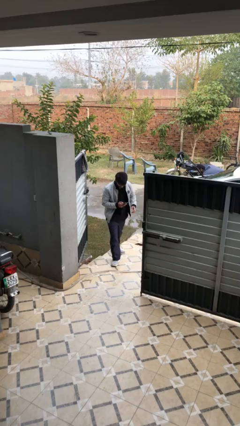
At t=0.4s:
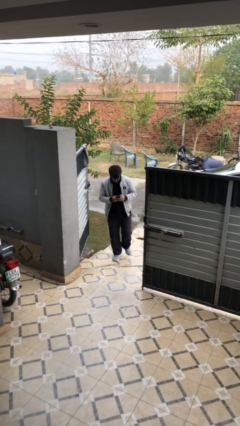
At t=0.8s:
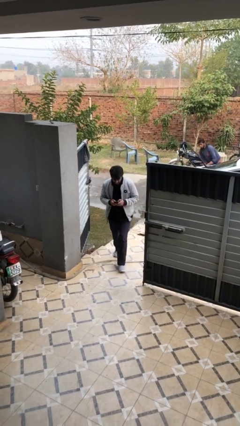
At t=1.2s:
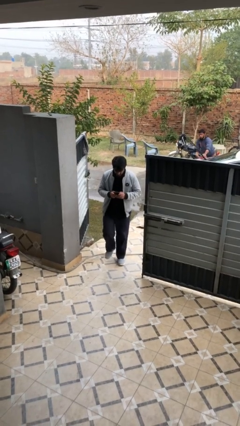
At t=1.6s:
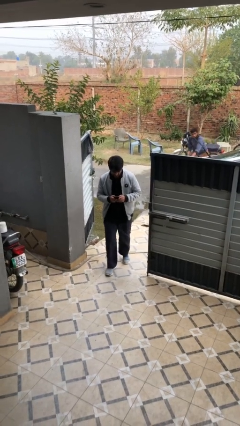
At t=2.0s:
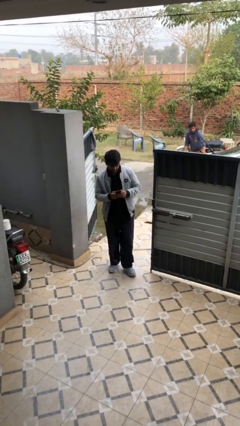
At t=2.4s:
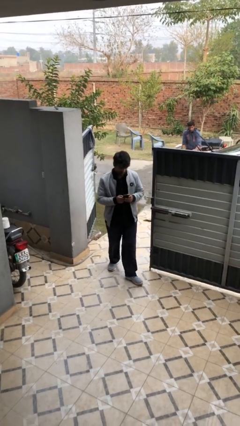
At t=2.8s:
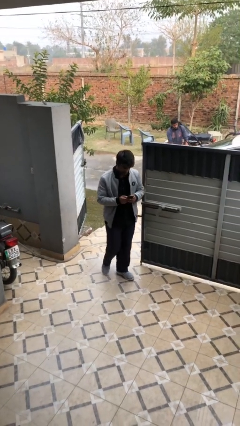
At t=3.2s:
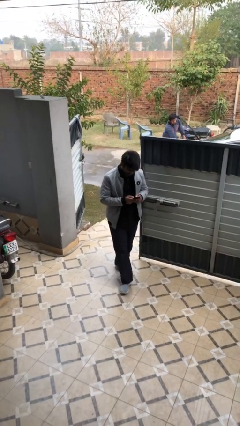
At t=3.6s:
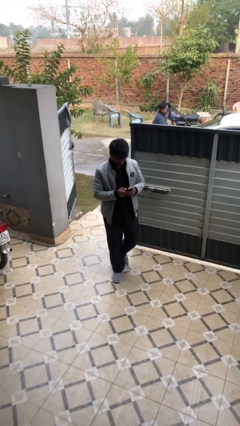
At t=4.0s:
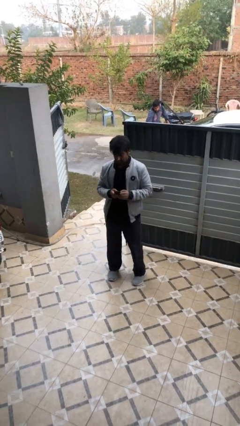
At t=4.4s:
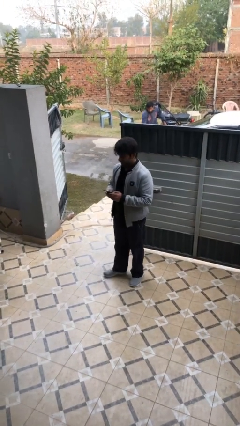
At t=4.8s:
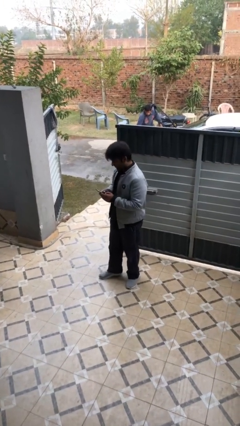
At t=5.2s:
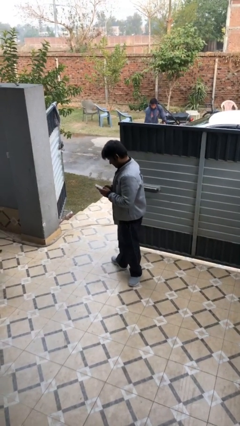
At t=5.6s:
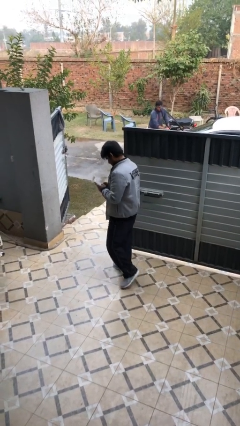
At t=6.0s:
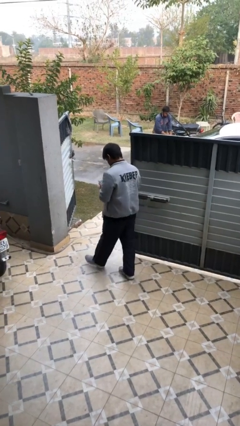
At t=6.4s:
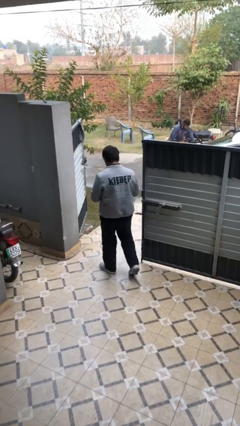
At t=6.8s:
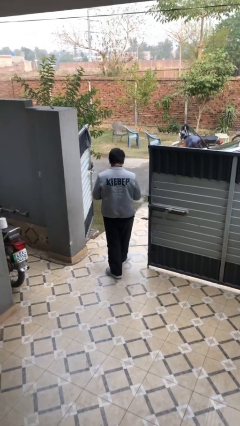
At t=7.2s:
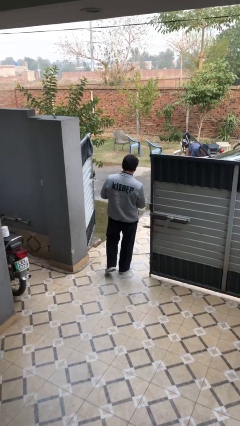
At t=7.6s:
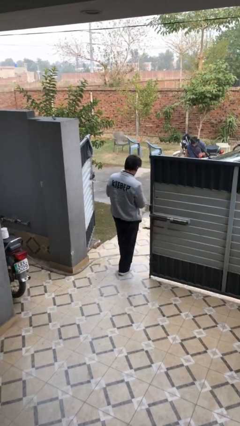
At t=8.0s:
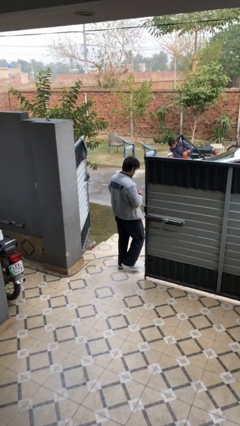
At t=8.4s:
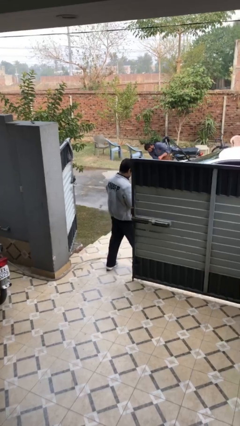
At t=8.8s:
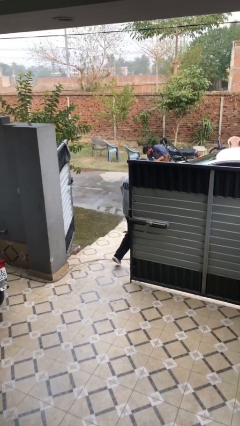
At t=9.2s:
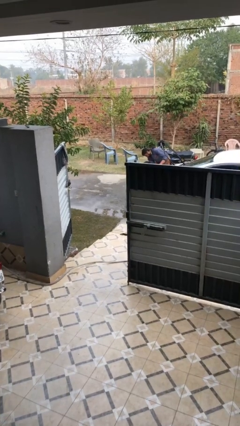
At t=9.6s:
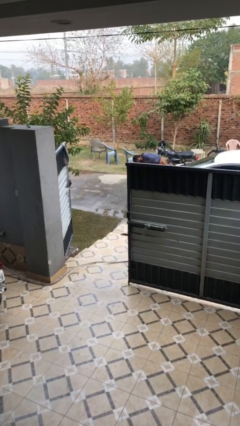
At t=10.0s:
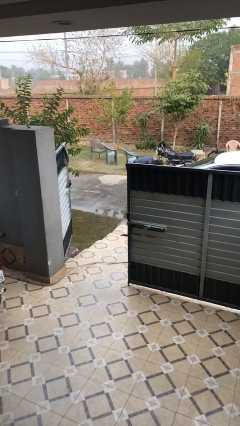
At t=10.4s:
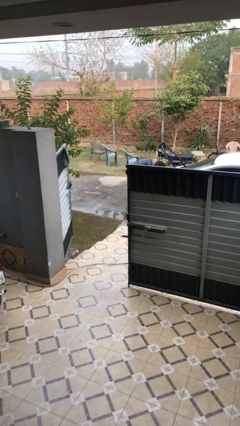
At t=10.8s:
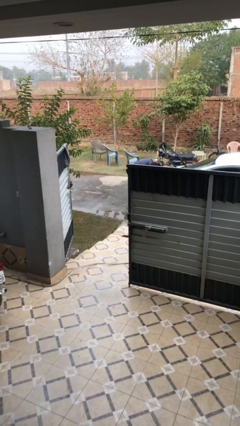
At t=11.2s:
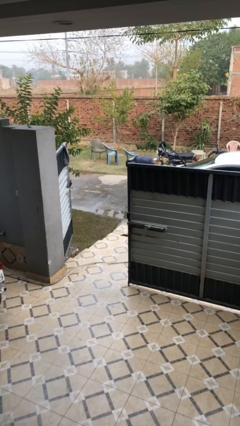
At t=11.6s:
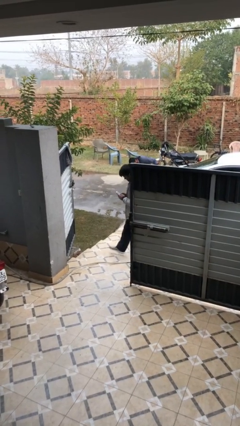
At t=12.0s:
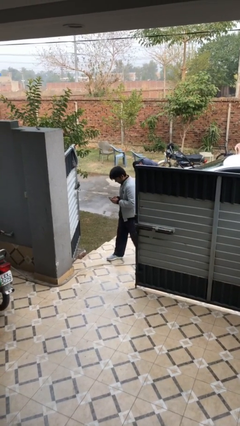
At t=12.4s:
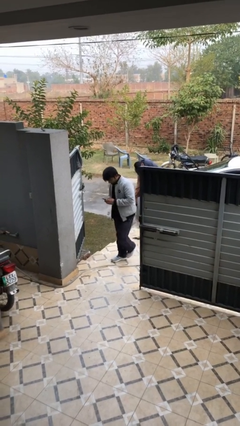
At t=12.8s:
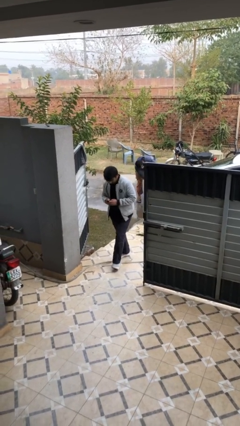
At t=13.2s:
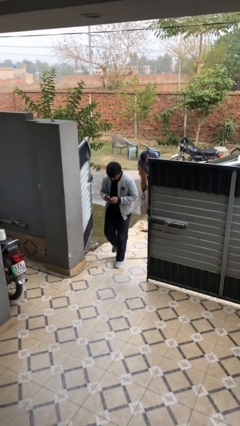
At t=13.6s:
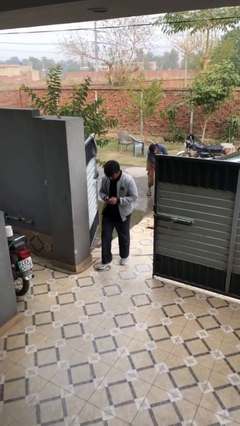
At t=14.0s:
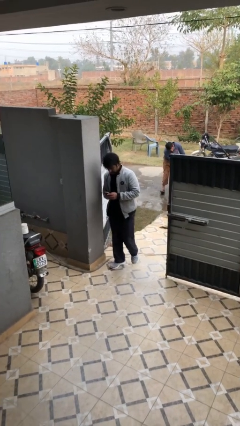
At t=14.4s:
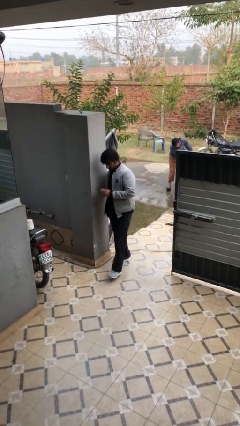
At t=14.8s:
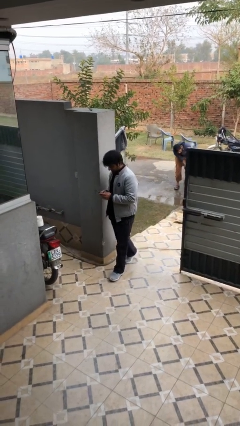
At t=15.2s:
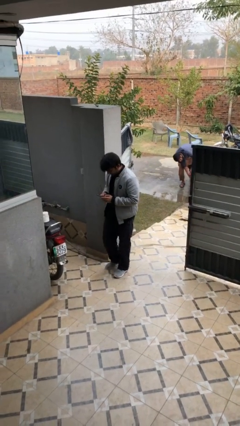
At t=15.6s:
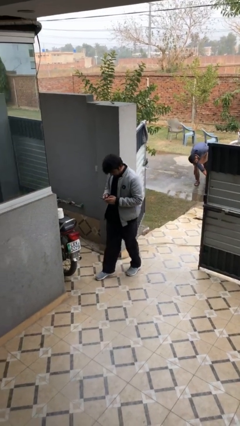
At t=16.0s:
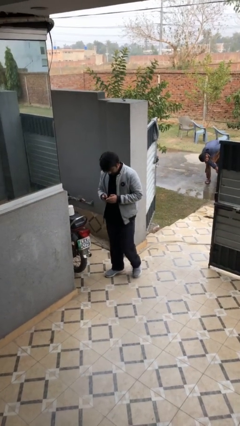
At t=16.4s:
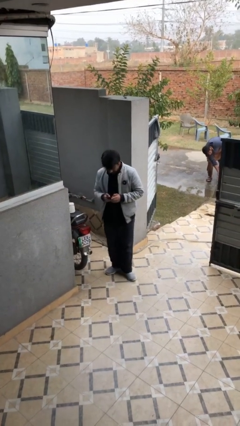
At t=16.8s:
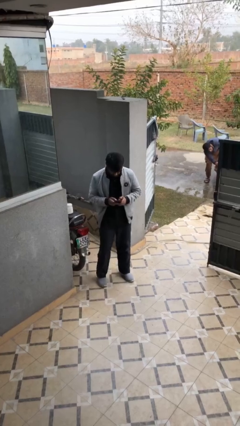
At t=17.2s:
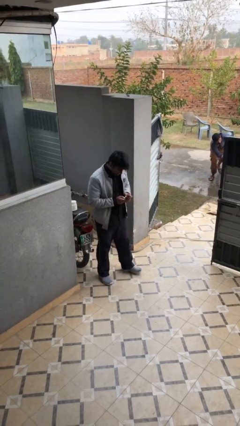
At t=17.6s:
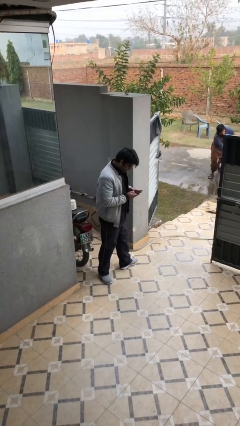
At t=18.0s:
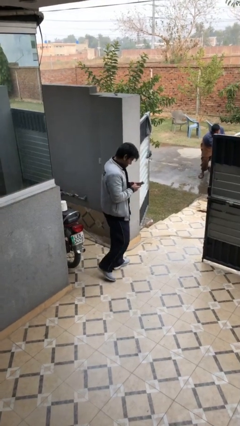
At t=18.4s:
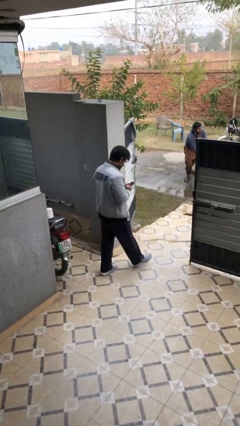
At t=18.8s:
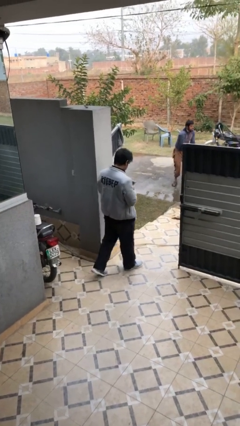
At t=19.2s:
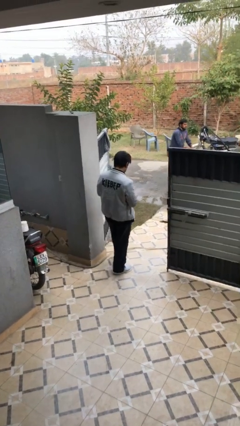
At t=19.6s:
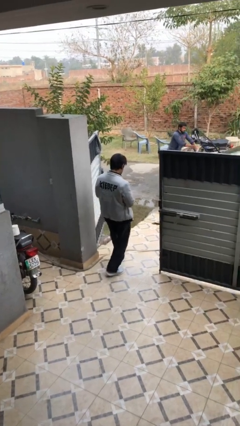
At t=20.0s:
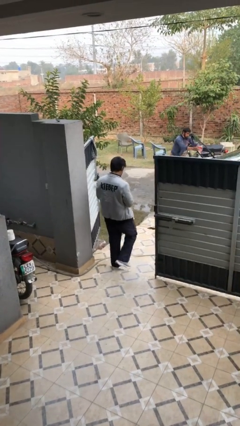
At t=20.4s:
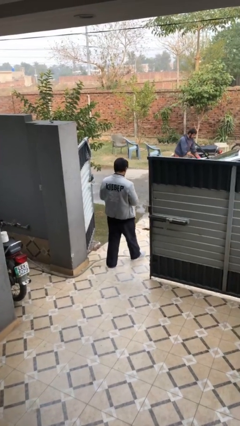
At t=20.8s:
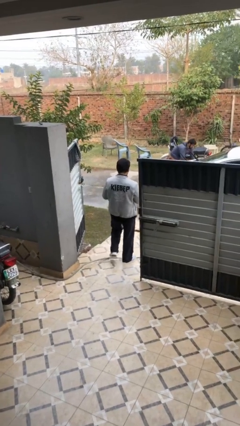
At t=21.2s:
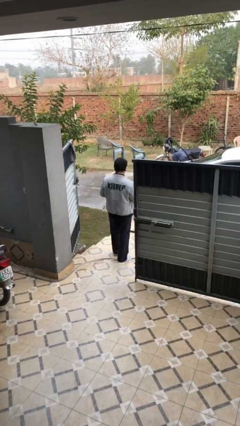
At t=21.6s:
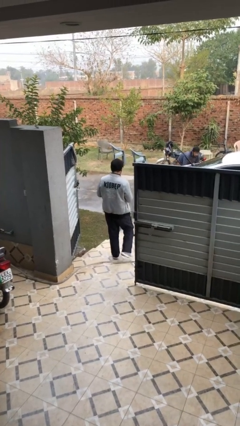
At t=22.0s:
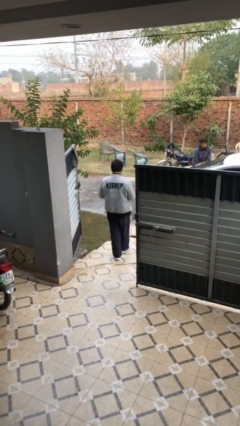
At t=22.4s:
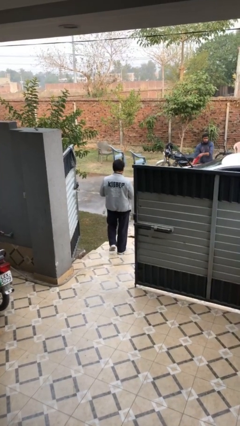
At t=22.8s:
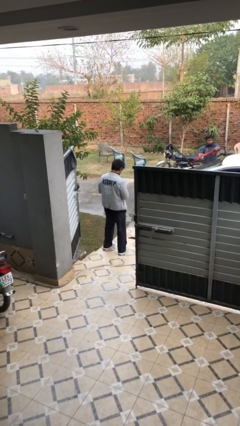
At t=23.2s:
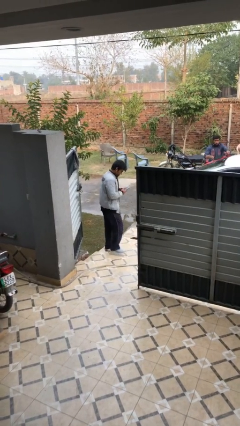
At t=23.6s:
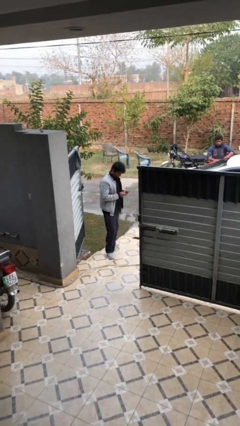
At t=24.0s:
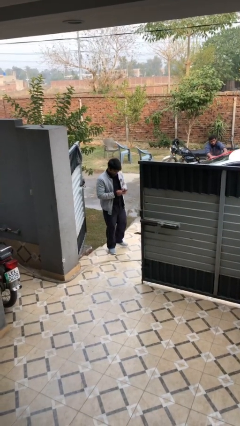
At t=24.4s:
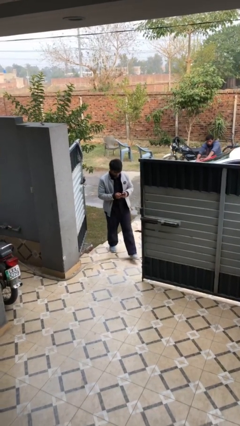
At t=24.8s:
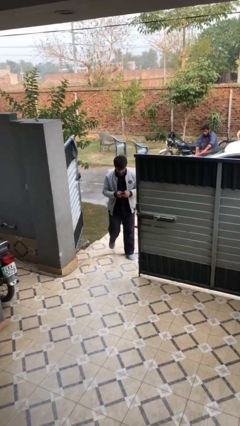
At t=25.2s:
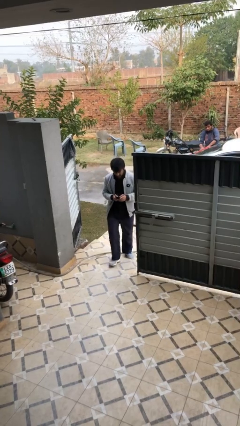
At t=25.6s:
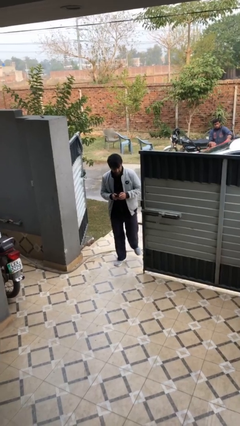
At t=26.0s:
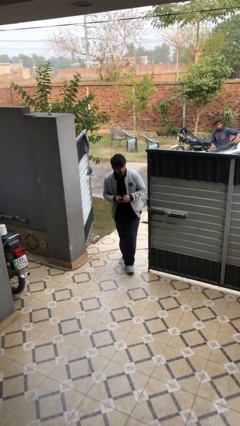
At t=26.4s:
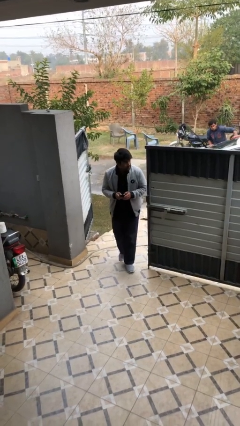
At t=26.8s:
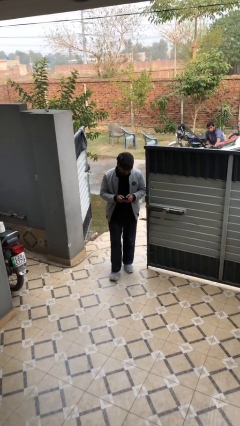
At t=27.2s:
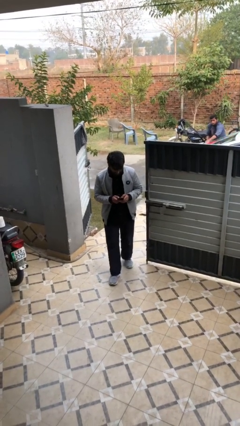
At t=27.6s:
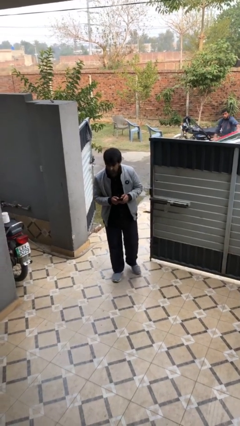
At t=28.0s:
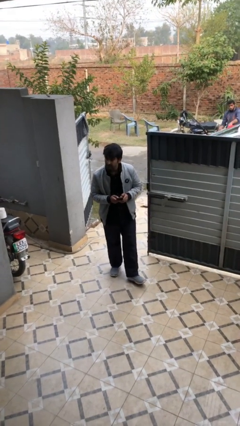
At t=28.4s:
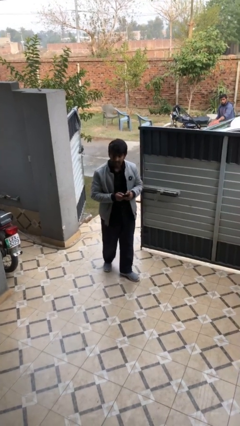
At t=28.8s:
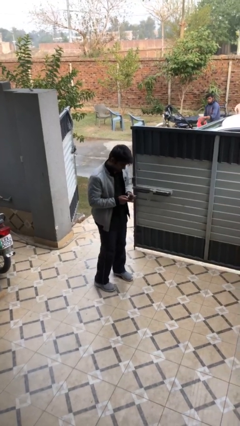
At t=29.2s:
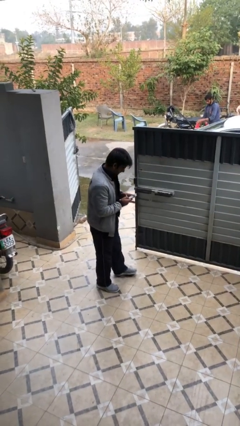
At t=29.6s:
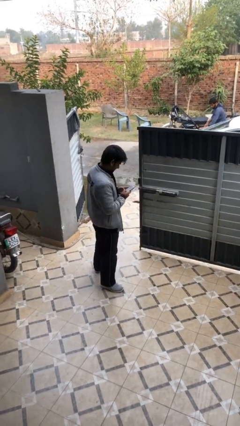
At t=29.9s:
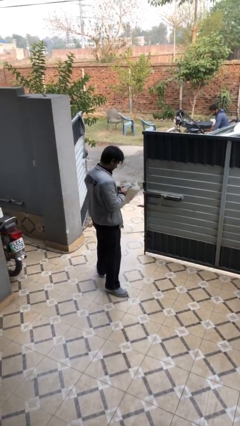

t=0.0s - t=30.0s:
person texts on phone

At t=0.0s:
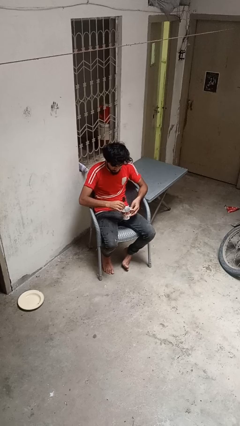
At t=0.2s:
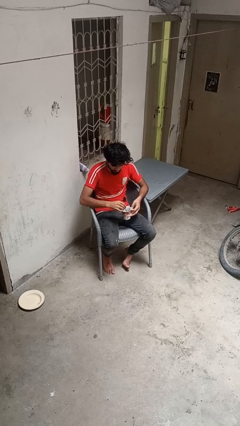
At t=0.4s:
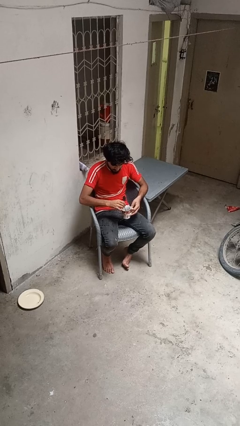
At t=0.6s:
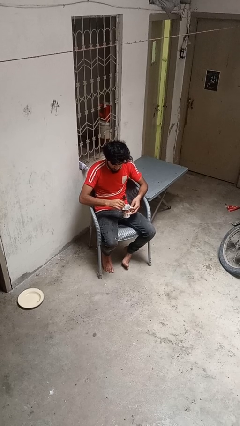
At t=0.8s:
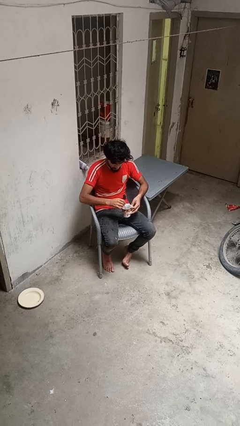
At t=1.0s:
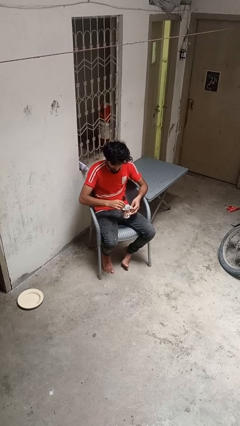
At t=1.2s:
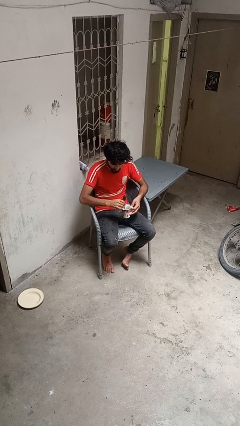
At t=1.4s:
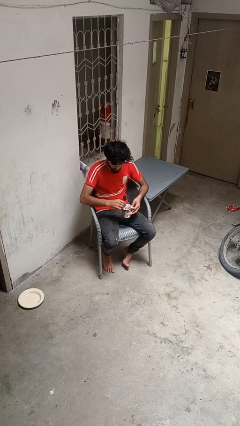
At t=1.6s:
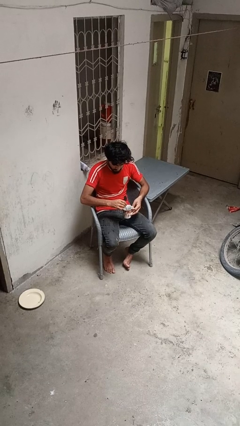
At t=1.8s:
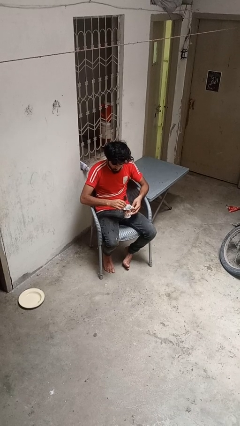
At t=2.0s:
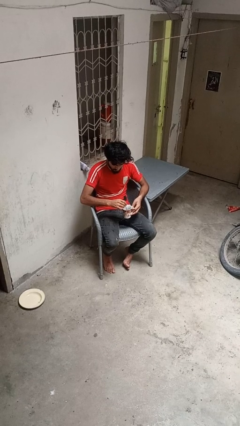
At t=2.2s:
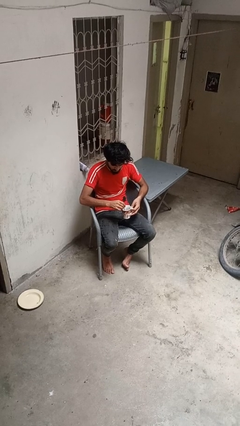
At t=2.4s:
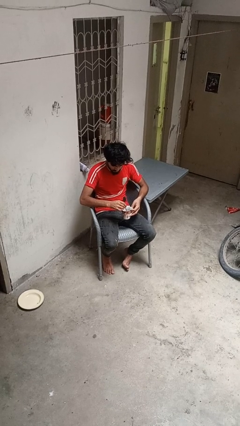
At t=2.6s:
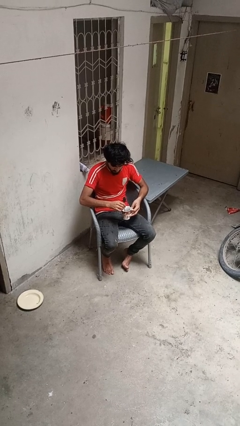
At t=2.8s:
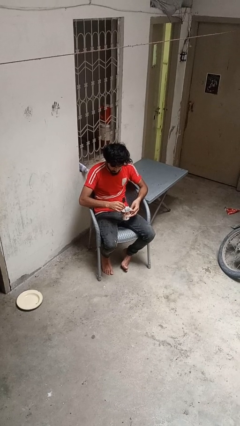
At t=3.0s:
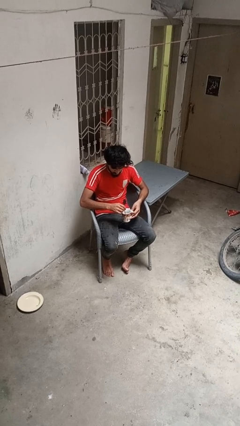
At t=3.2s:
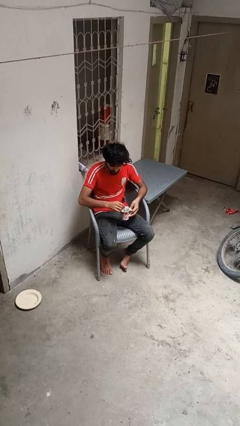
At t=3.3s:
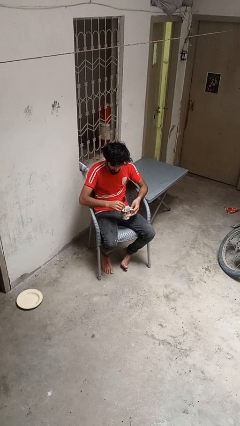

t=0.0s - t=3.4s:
person stirs mug
